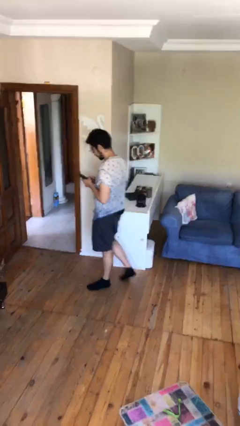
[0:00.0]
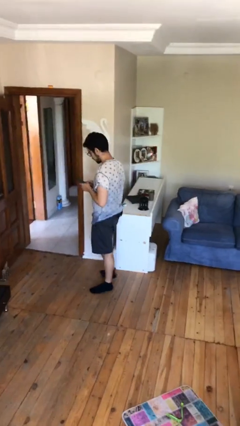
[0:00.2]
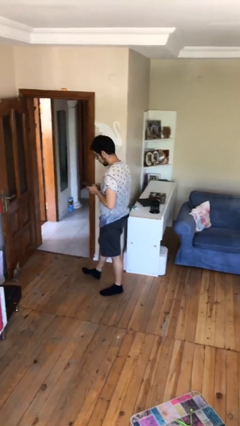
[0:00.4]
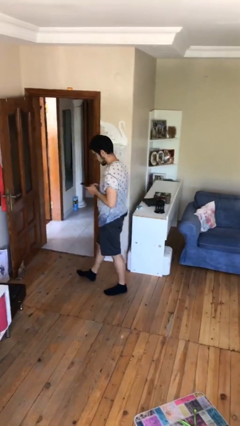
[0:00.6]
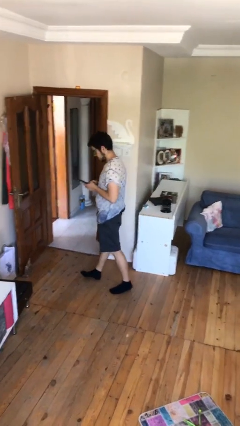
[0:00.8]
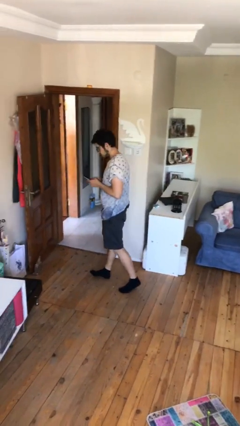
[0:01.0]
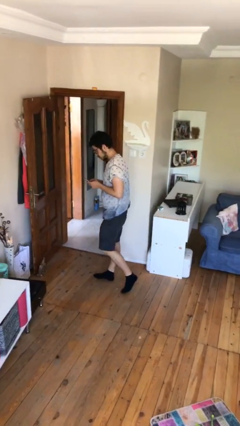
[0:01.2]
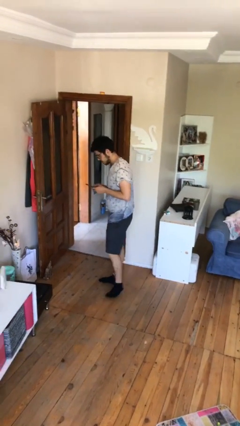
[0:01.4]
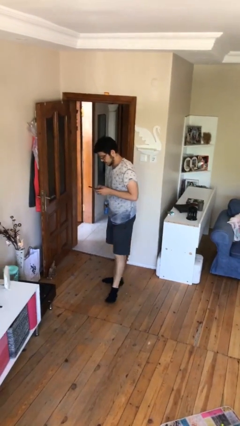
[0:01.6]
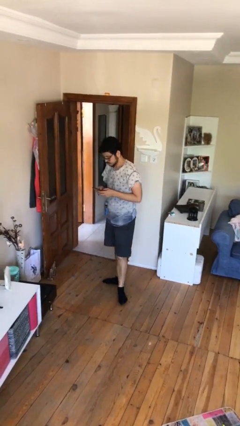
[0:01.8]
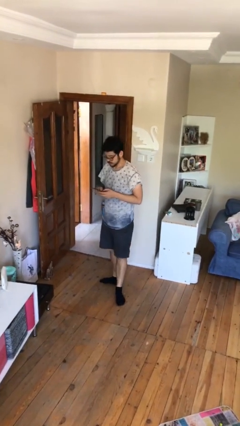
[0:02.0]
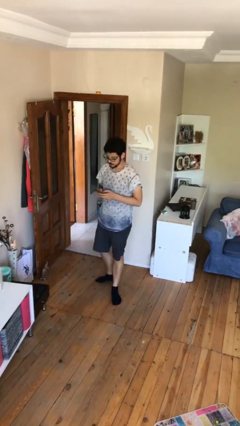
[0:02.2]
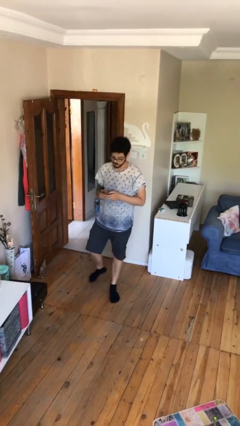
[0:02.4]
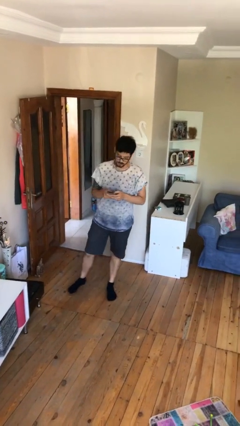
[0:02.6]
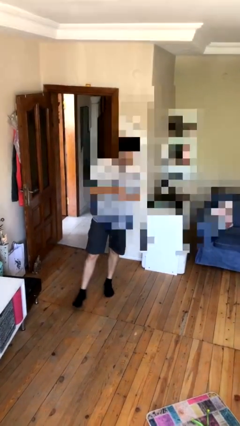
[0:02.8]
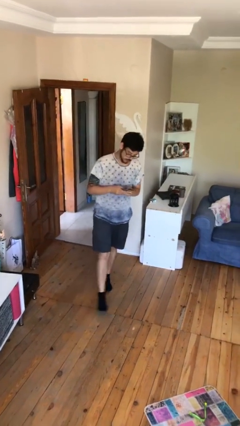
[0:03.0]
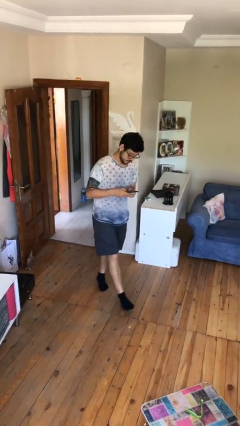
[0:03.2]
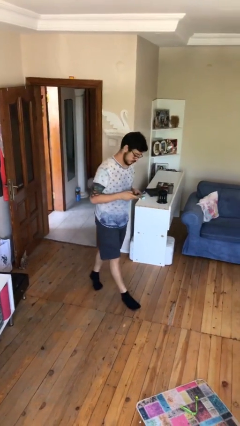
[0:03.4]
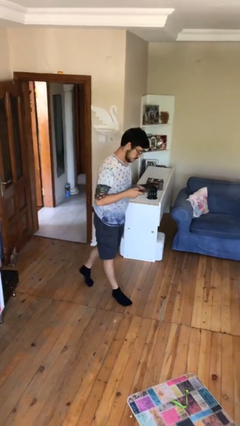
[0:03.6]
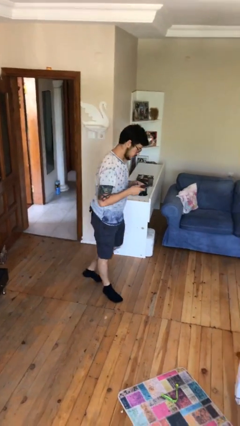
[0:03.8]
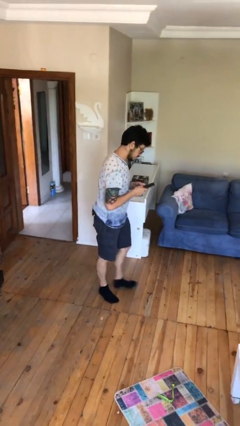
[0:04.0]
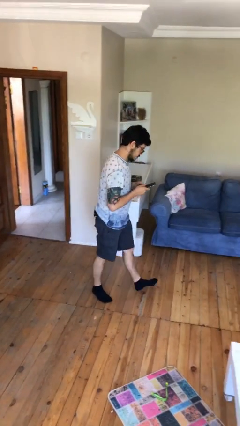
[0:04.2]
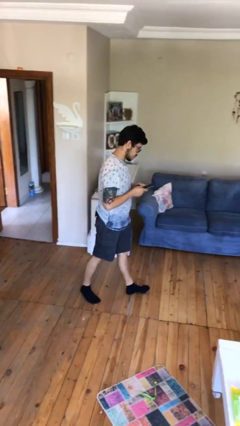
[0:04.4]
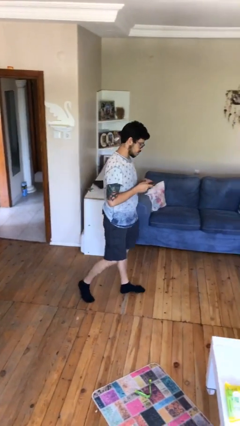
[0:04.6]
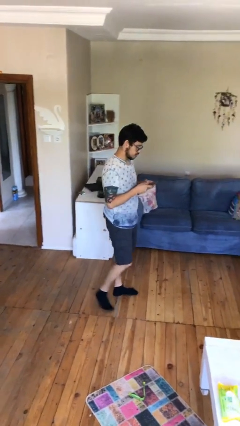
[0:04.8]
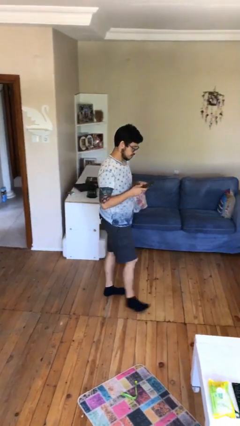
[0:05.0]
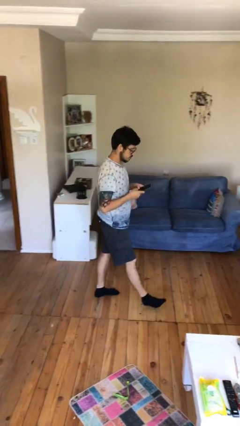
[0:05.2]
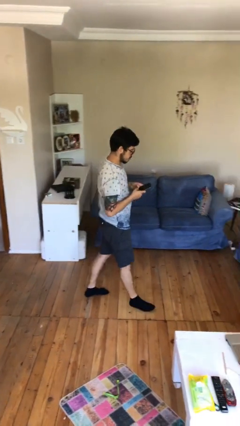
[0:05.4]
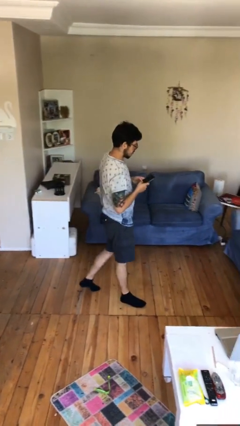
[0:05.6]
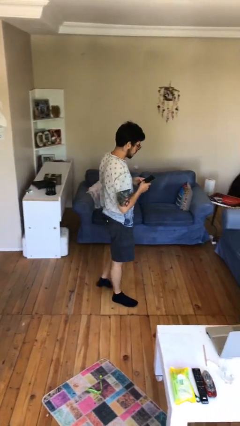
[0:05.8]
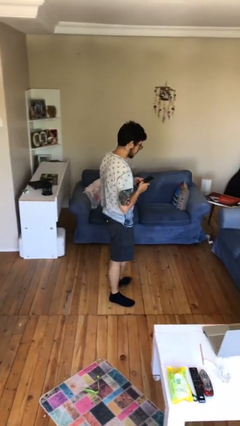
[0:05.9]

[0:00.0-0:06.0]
person texts on phone

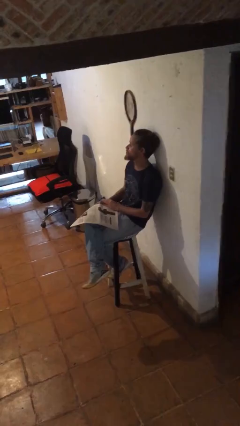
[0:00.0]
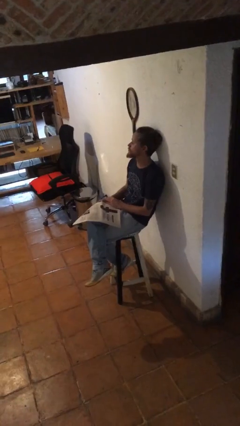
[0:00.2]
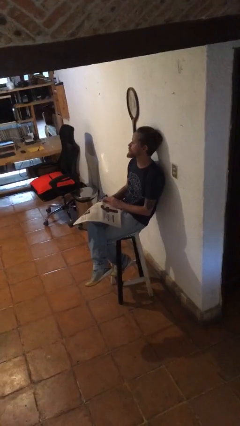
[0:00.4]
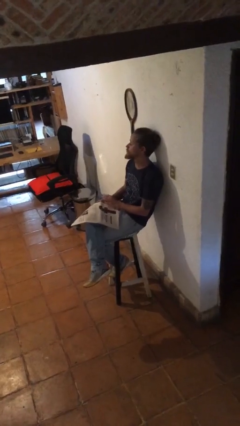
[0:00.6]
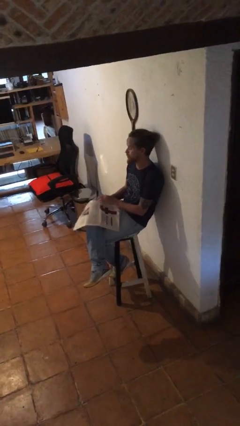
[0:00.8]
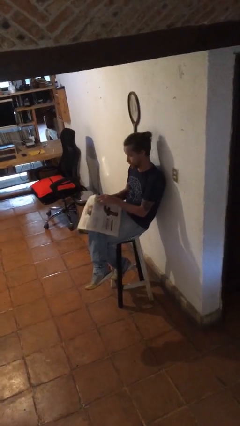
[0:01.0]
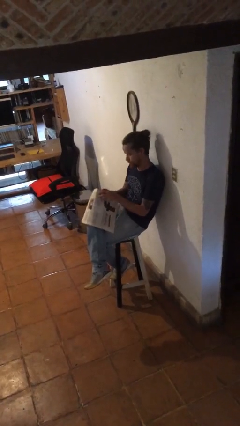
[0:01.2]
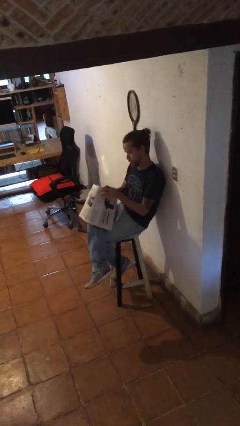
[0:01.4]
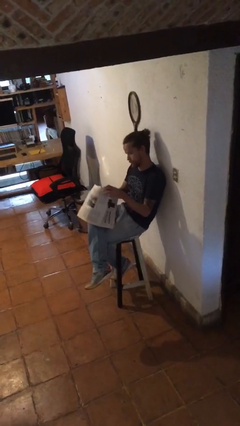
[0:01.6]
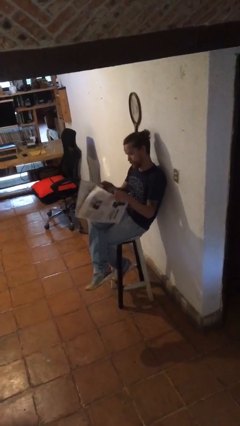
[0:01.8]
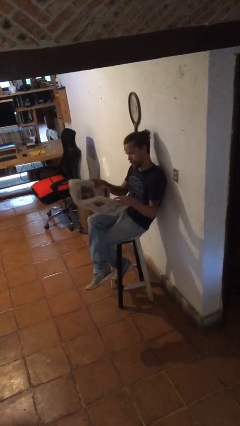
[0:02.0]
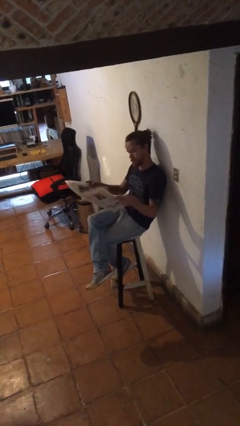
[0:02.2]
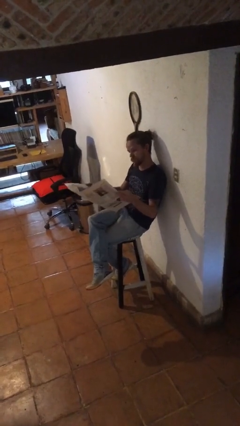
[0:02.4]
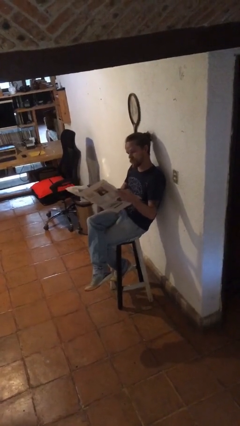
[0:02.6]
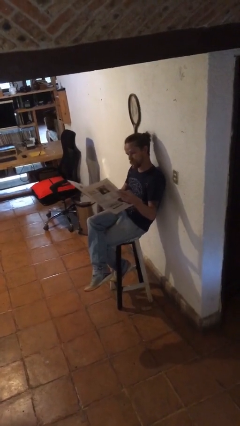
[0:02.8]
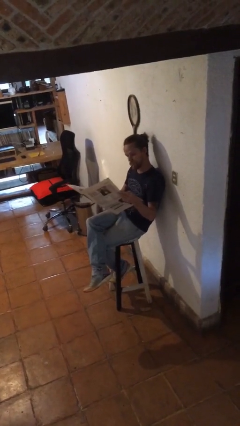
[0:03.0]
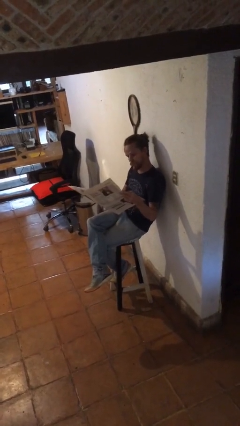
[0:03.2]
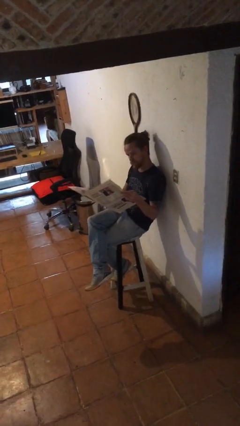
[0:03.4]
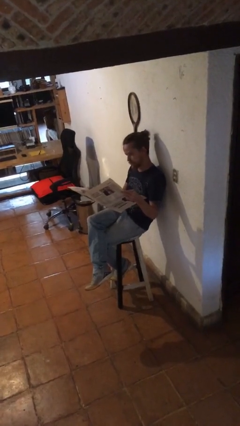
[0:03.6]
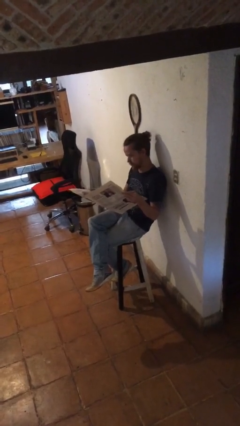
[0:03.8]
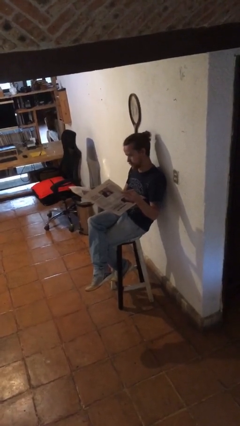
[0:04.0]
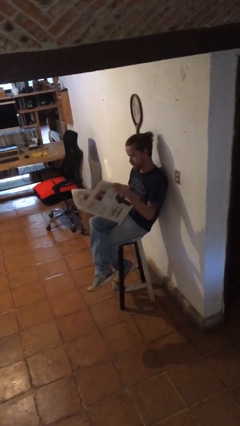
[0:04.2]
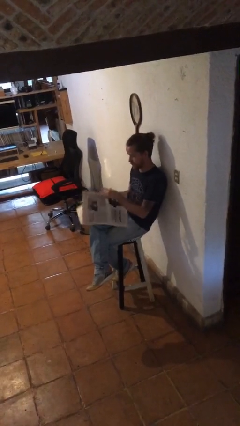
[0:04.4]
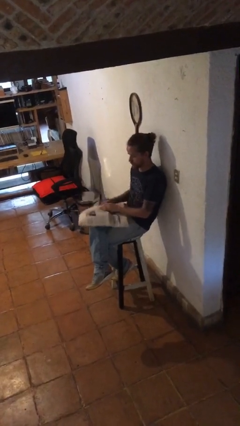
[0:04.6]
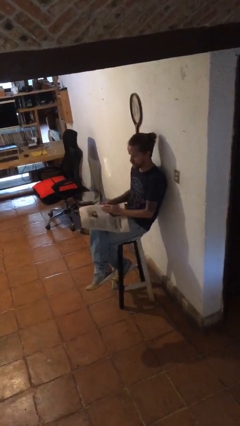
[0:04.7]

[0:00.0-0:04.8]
person reads newspaper

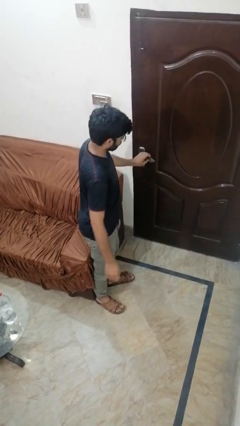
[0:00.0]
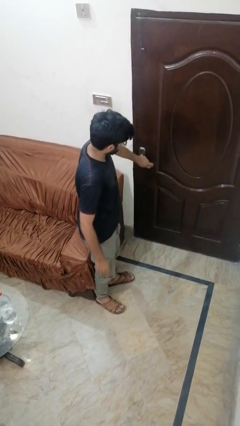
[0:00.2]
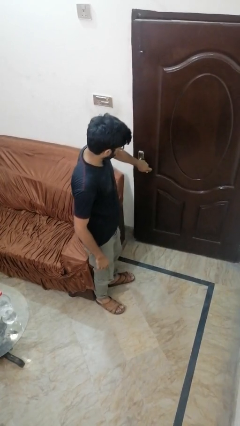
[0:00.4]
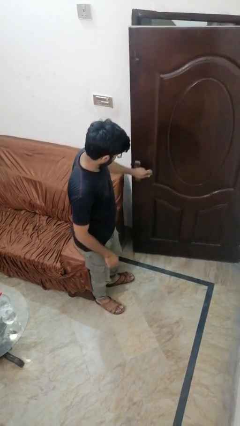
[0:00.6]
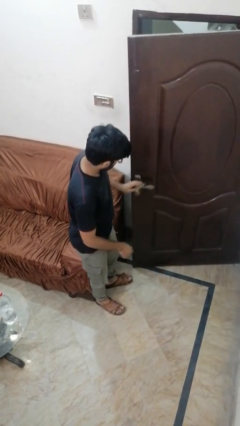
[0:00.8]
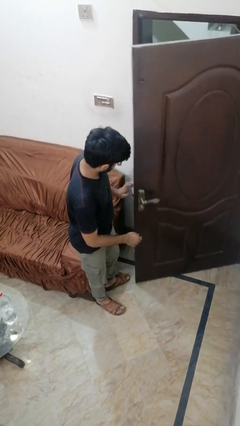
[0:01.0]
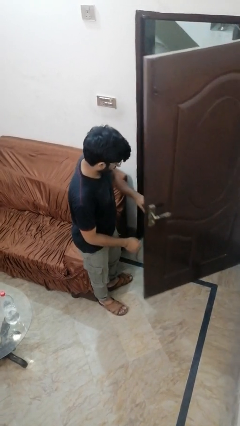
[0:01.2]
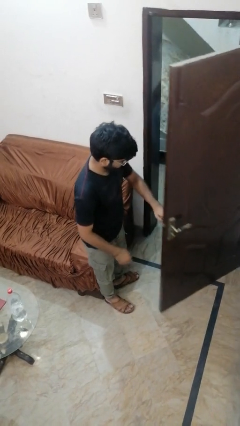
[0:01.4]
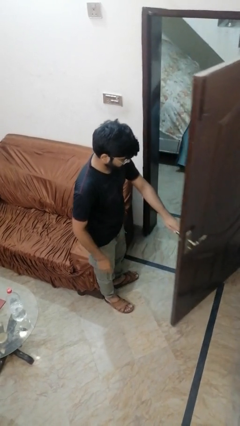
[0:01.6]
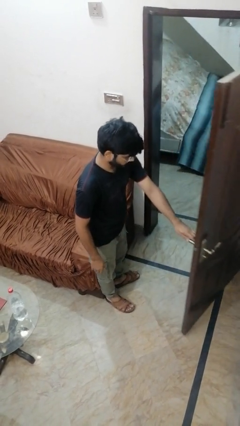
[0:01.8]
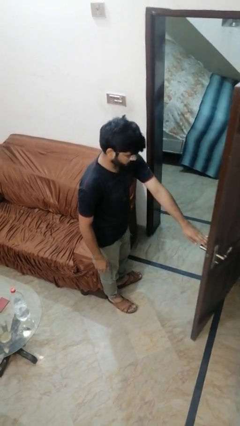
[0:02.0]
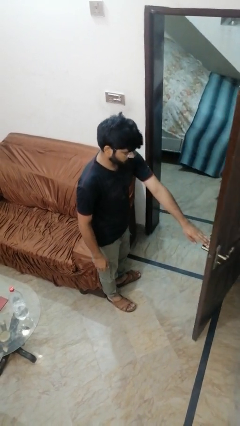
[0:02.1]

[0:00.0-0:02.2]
person opens facility door

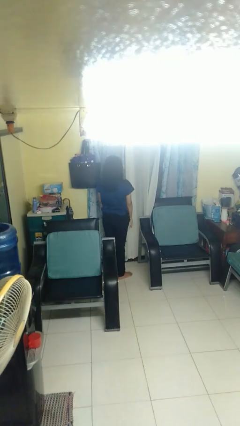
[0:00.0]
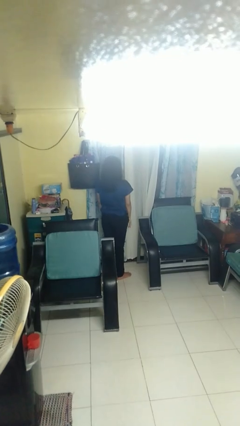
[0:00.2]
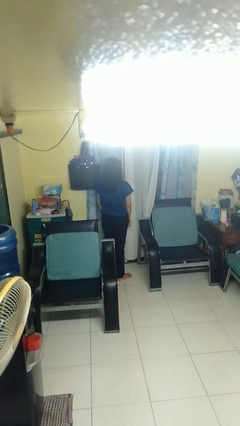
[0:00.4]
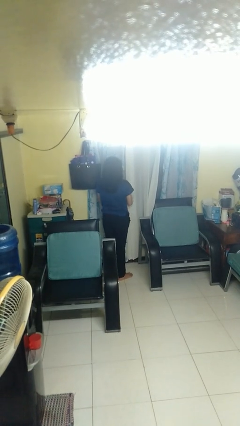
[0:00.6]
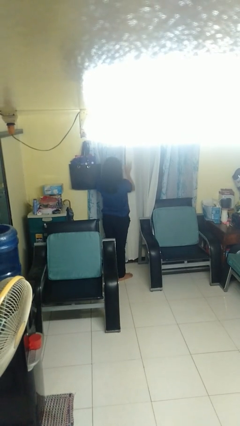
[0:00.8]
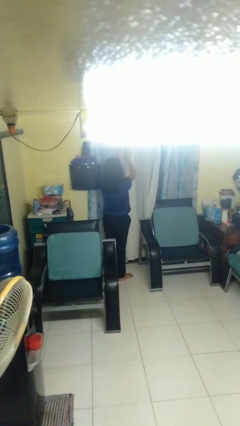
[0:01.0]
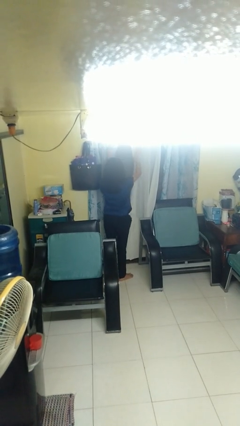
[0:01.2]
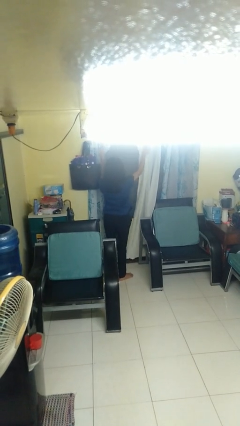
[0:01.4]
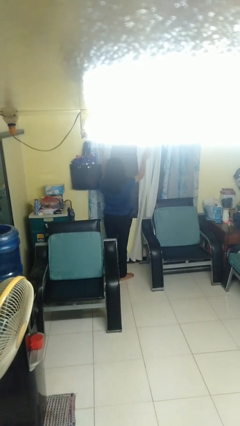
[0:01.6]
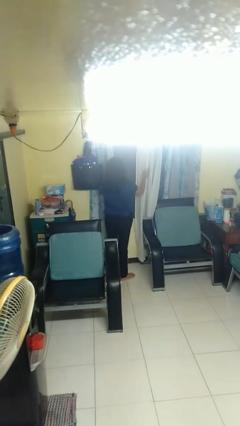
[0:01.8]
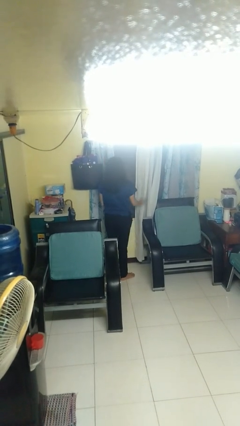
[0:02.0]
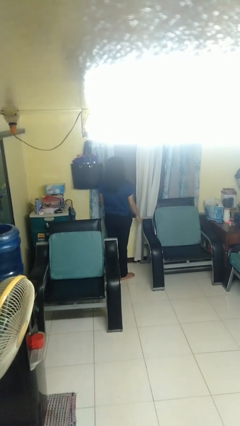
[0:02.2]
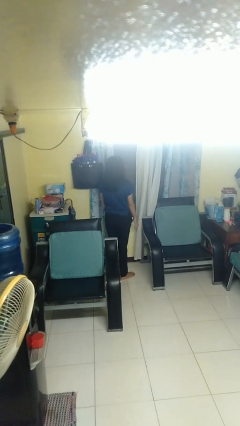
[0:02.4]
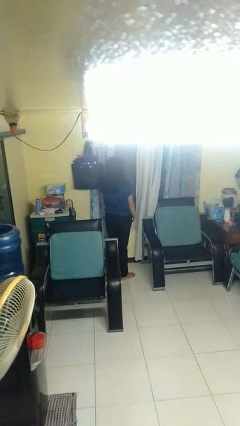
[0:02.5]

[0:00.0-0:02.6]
person opens curtains

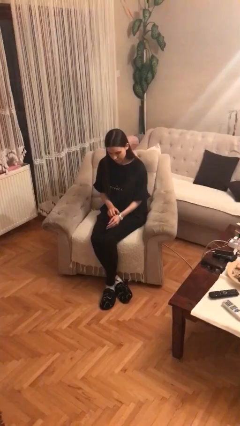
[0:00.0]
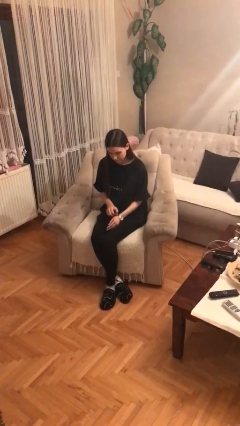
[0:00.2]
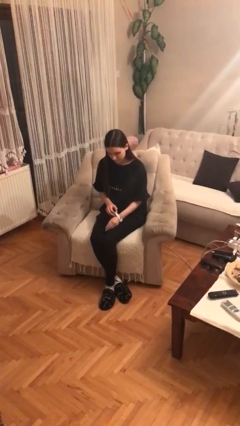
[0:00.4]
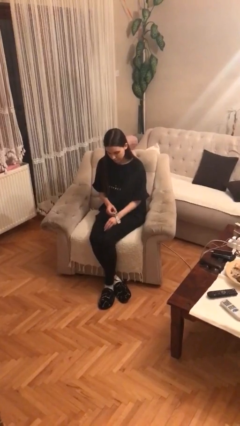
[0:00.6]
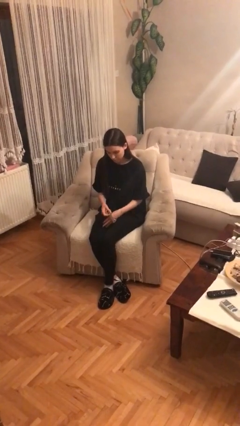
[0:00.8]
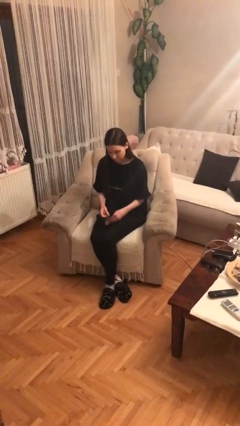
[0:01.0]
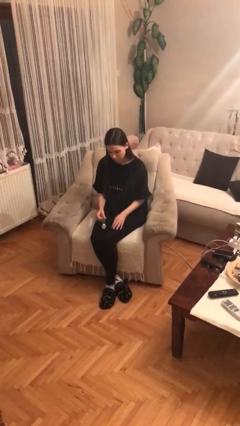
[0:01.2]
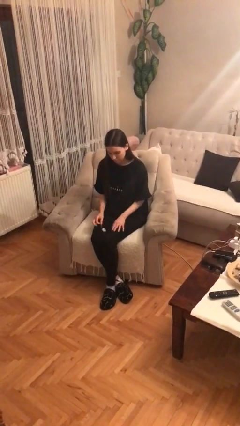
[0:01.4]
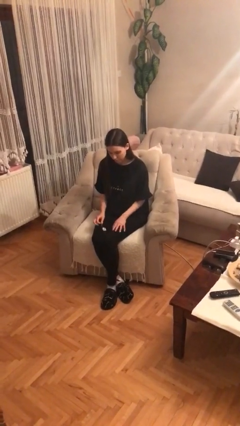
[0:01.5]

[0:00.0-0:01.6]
person takes off wristwatch
